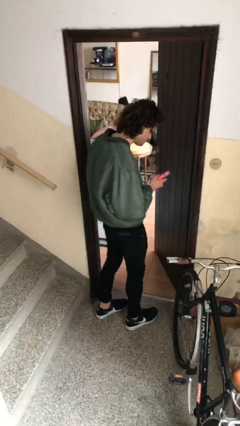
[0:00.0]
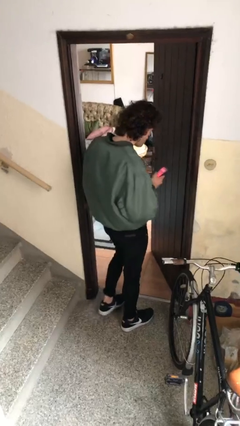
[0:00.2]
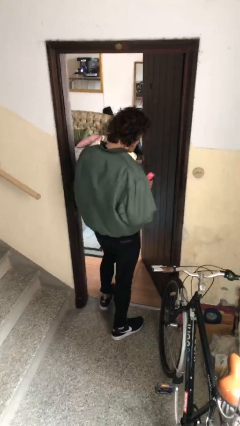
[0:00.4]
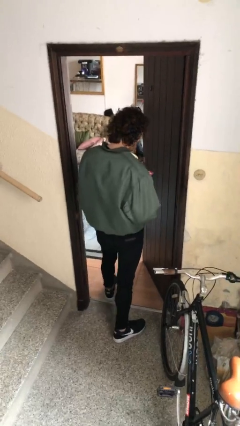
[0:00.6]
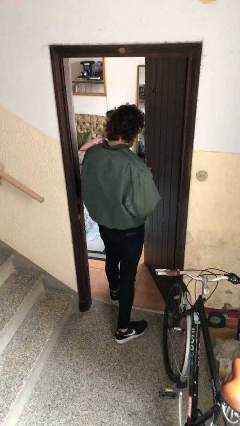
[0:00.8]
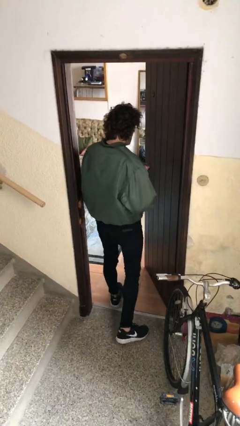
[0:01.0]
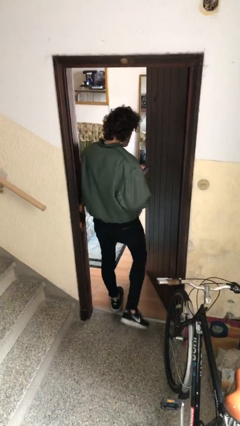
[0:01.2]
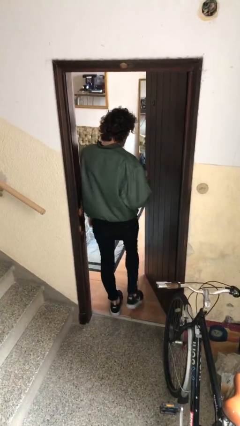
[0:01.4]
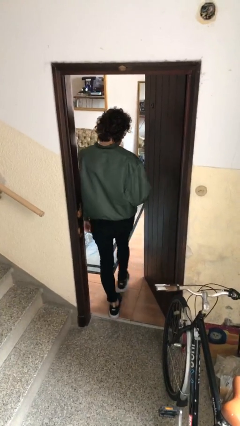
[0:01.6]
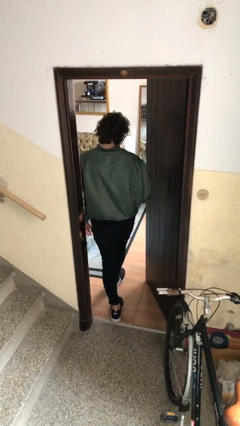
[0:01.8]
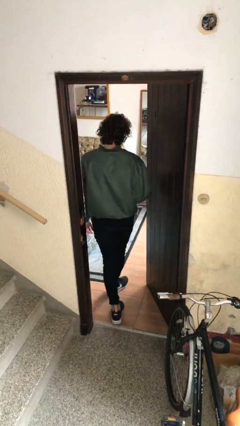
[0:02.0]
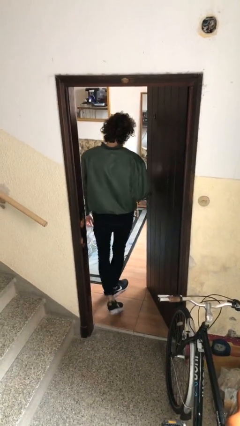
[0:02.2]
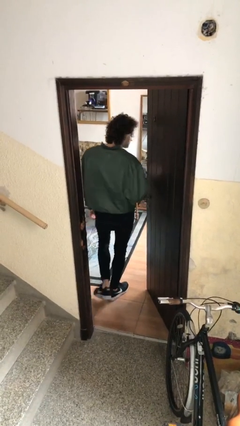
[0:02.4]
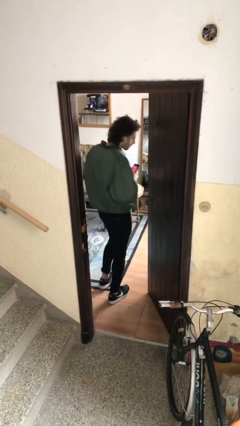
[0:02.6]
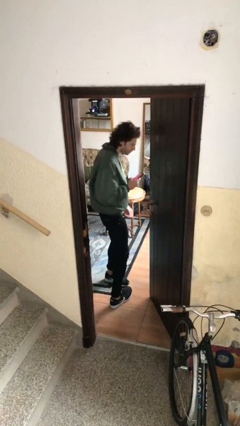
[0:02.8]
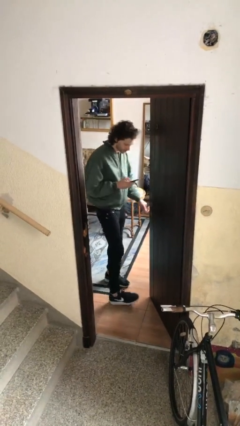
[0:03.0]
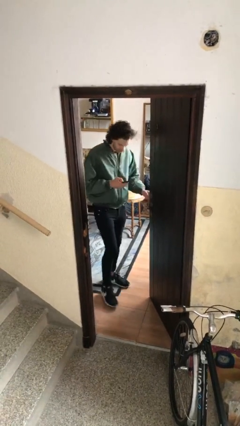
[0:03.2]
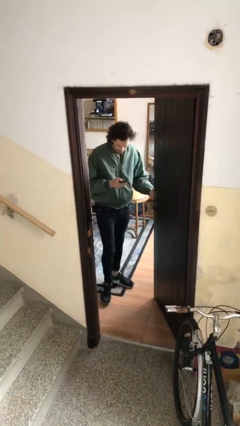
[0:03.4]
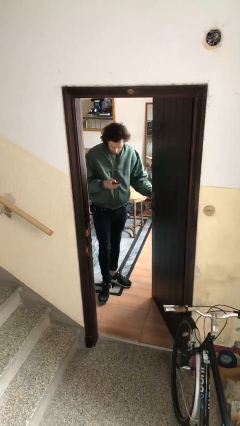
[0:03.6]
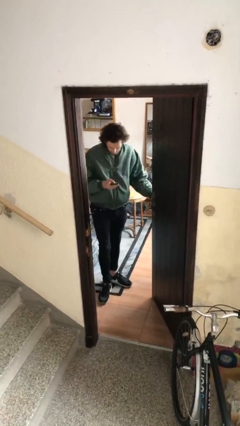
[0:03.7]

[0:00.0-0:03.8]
person exits scene through structure

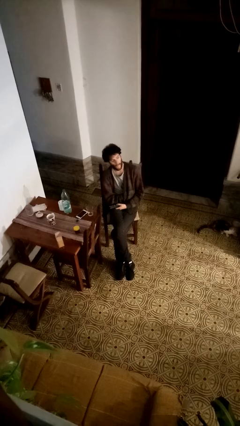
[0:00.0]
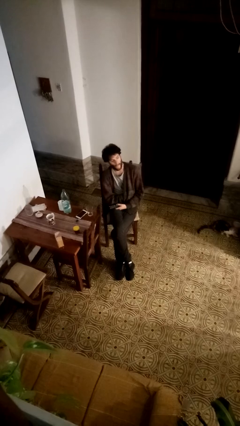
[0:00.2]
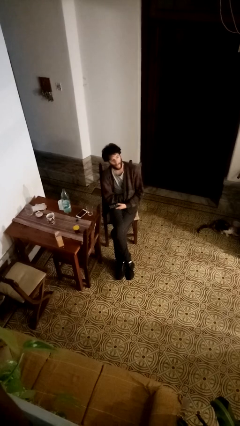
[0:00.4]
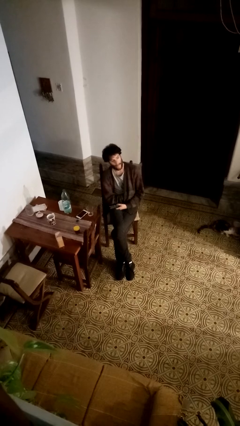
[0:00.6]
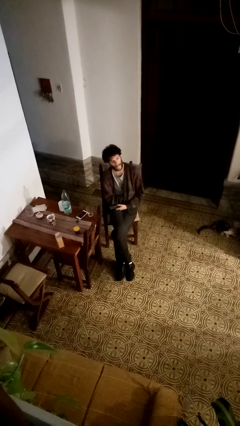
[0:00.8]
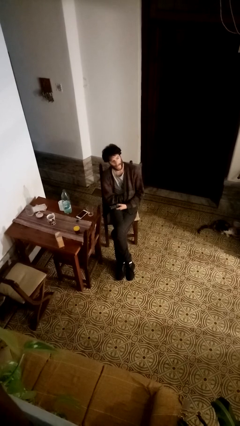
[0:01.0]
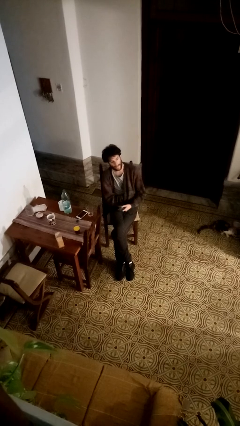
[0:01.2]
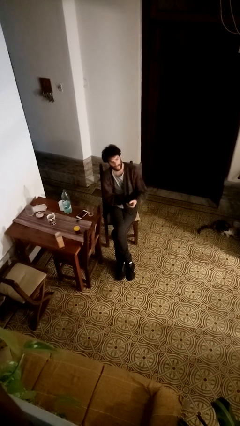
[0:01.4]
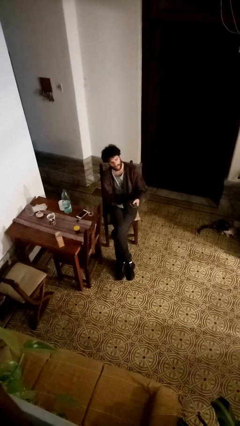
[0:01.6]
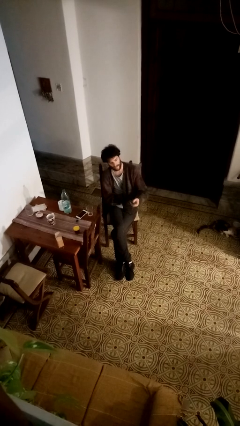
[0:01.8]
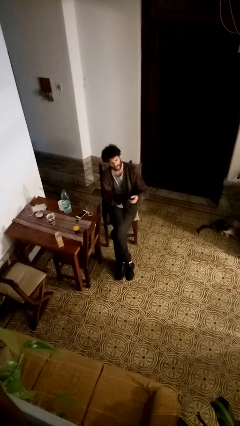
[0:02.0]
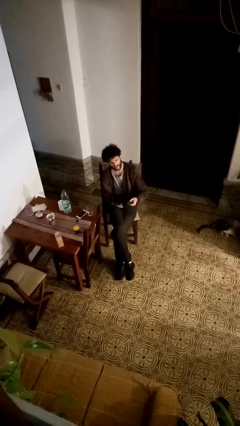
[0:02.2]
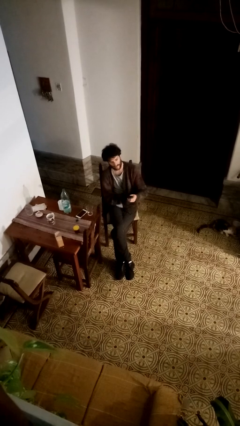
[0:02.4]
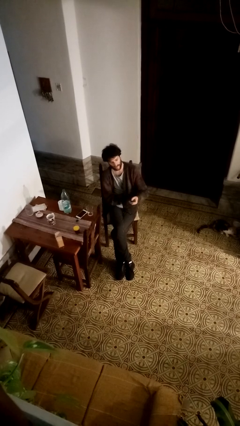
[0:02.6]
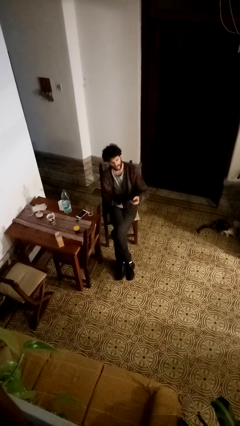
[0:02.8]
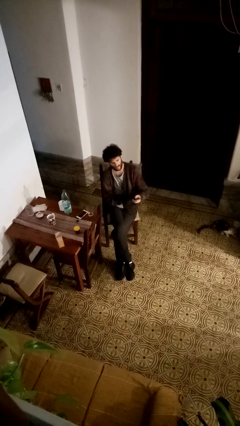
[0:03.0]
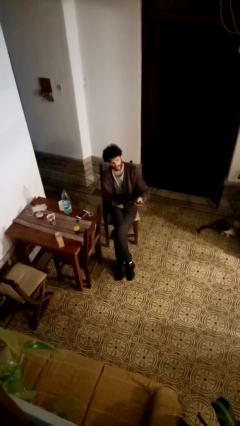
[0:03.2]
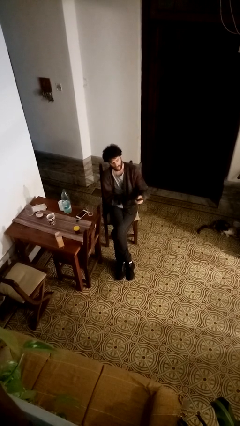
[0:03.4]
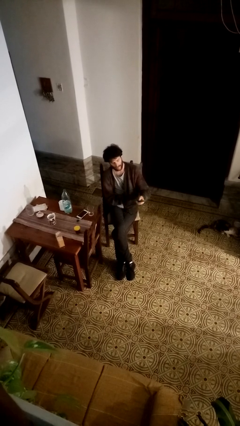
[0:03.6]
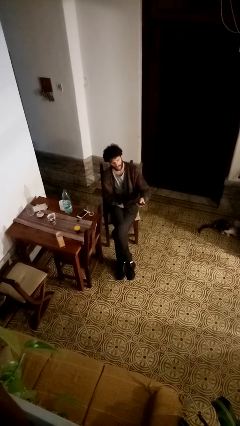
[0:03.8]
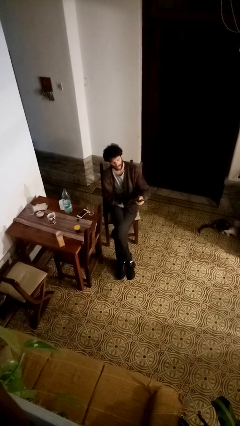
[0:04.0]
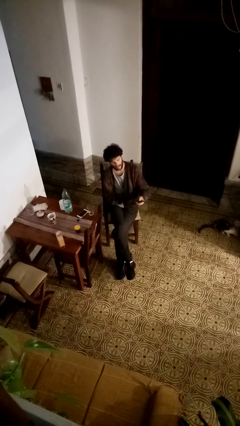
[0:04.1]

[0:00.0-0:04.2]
person uses television remote

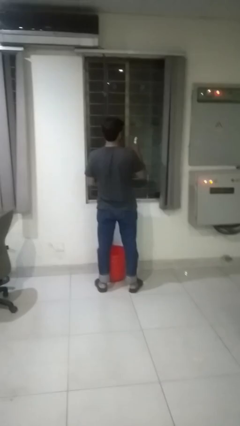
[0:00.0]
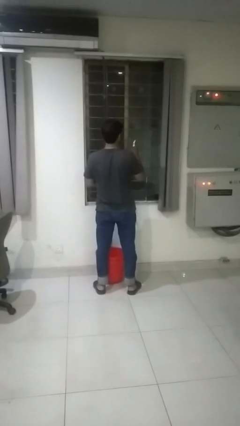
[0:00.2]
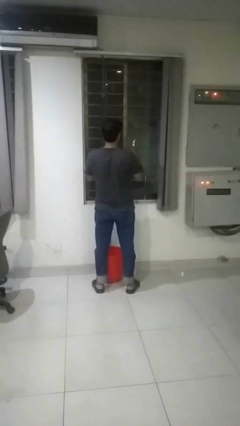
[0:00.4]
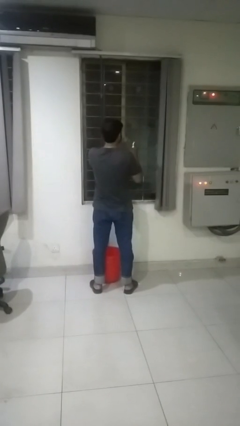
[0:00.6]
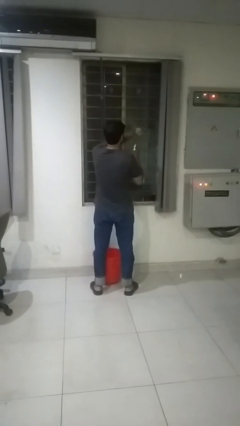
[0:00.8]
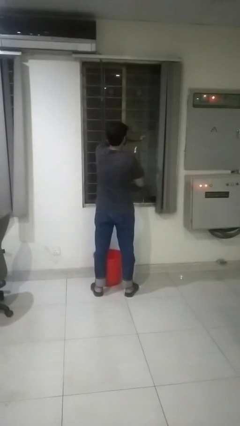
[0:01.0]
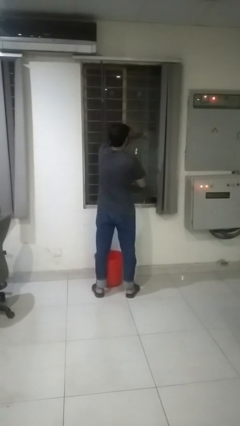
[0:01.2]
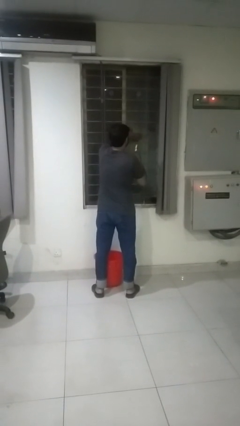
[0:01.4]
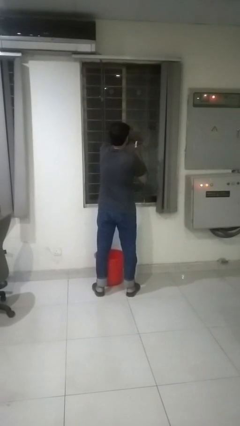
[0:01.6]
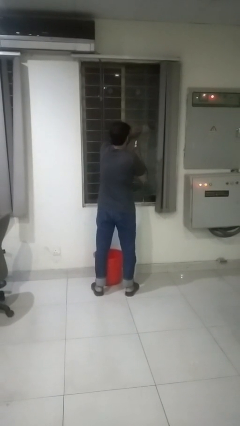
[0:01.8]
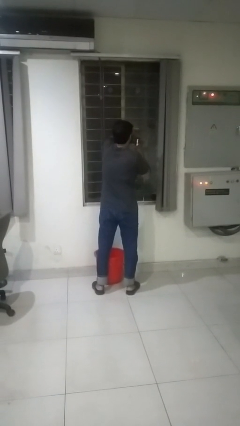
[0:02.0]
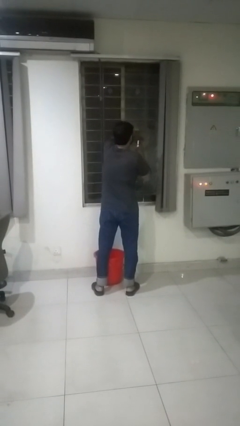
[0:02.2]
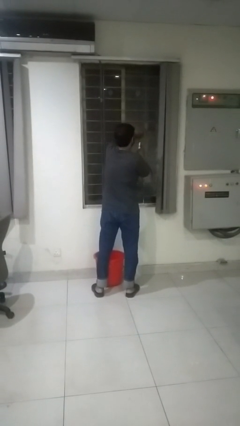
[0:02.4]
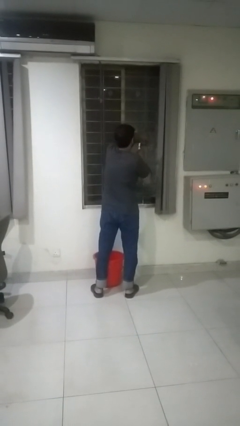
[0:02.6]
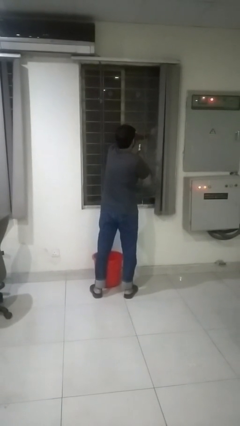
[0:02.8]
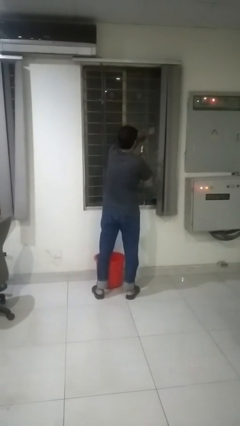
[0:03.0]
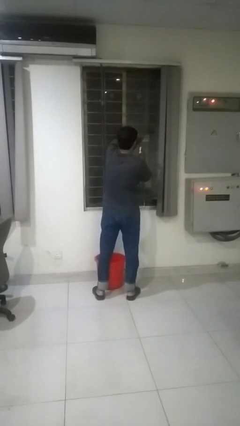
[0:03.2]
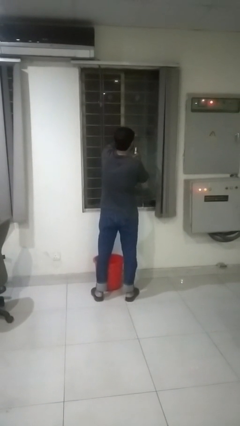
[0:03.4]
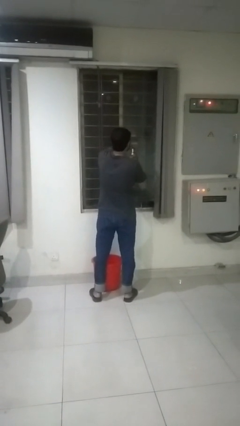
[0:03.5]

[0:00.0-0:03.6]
person washes window

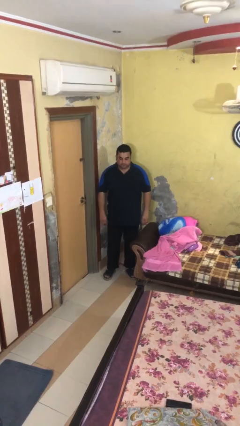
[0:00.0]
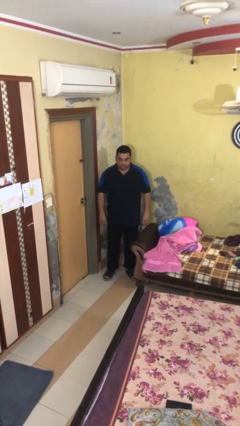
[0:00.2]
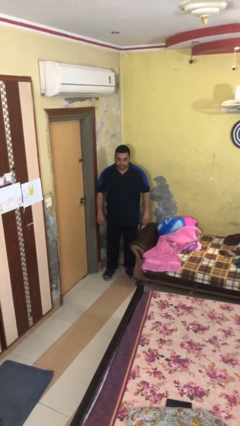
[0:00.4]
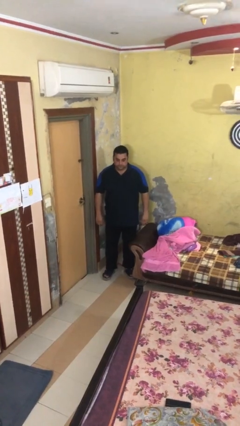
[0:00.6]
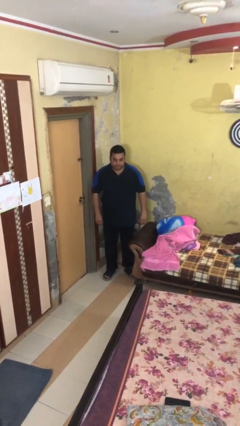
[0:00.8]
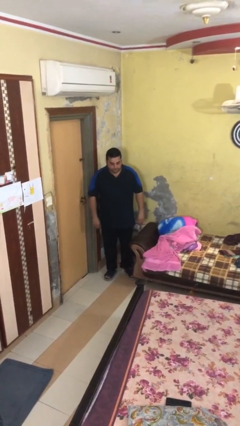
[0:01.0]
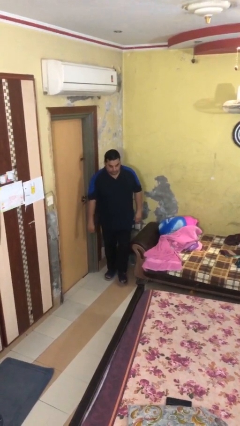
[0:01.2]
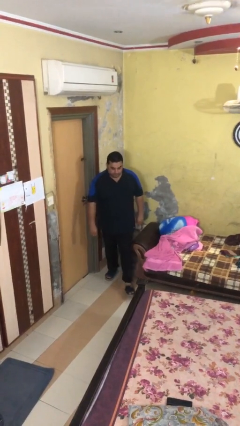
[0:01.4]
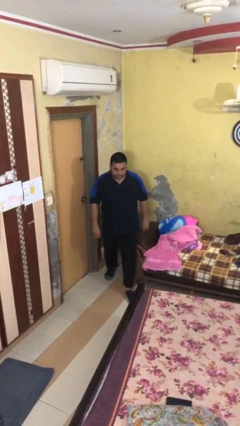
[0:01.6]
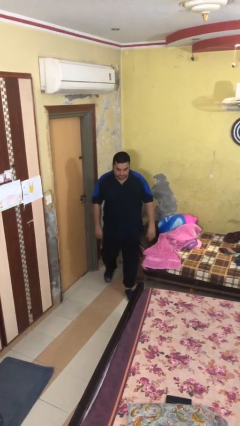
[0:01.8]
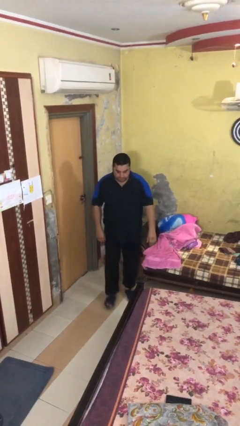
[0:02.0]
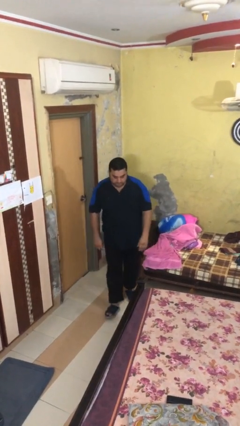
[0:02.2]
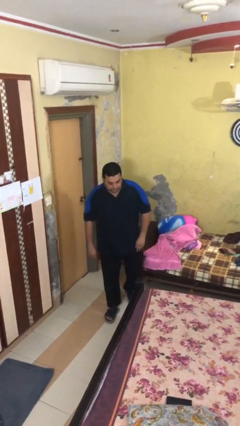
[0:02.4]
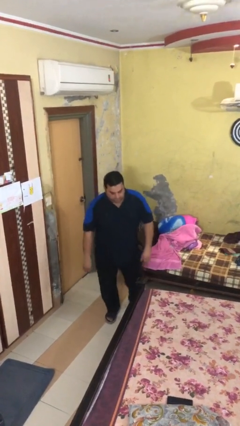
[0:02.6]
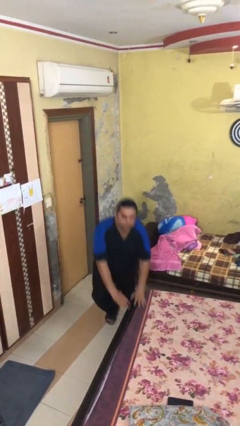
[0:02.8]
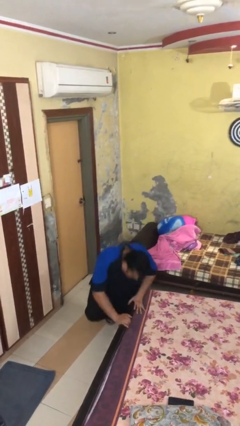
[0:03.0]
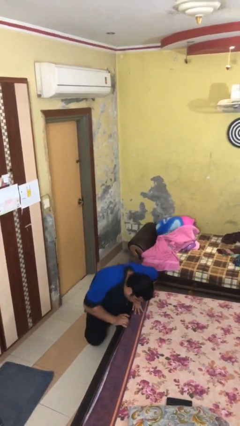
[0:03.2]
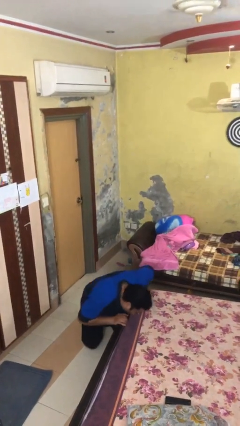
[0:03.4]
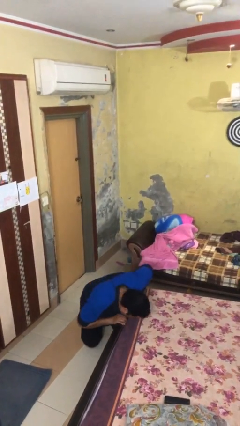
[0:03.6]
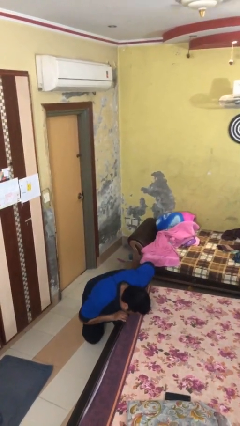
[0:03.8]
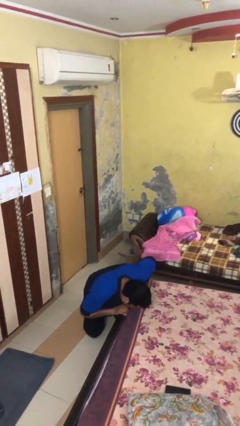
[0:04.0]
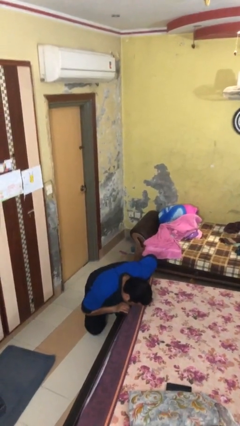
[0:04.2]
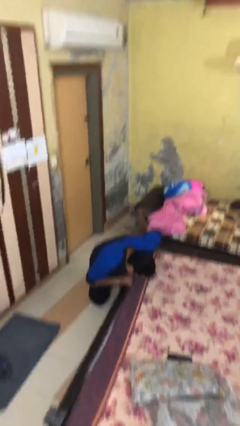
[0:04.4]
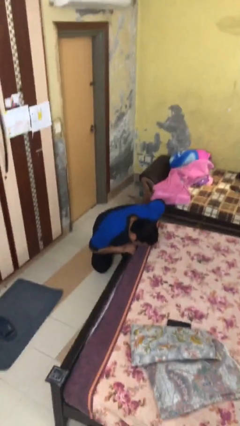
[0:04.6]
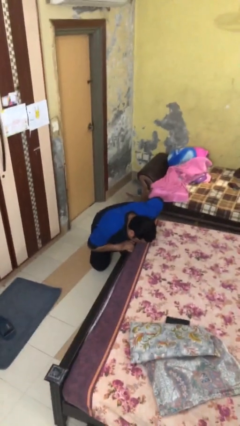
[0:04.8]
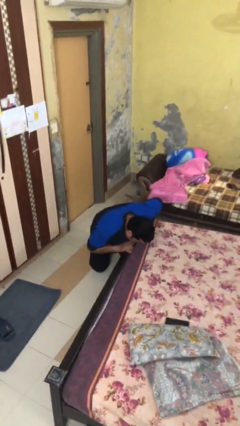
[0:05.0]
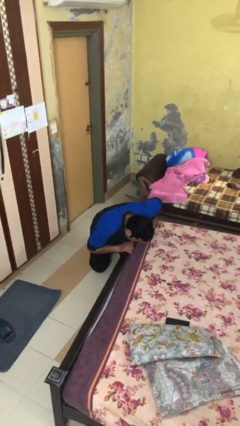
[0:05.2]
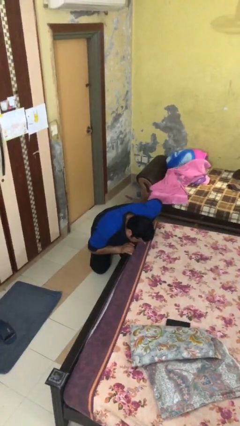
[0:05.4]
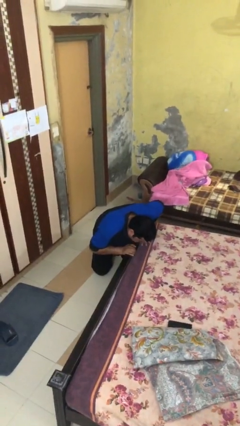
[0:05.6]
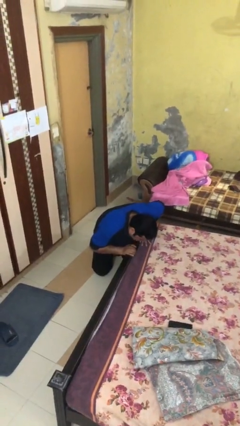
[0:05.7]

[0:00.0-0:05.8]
person trips on object on floor

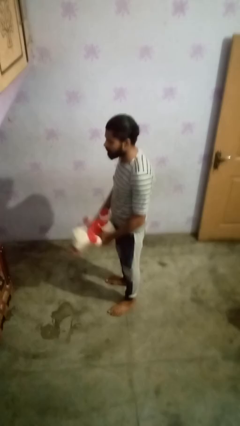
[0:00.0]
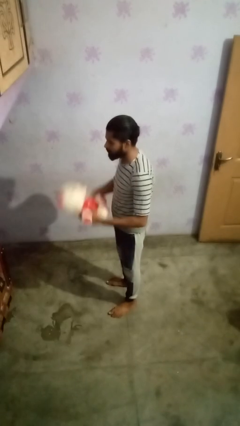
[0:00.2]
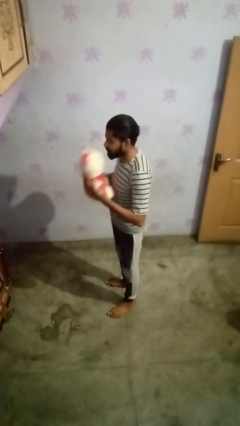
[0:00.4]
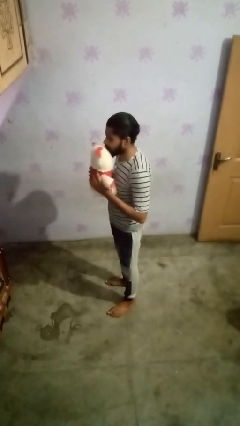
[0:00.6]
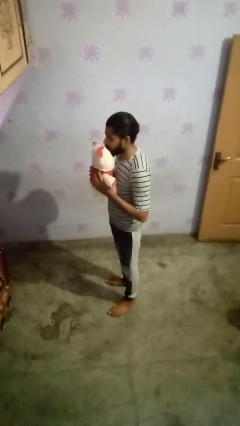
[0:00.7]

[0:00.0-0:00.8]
person hugs stuffed animal
